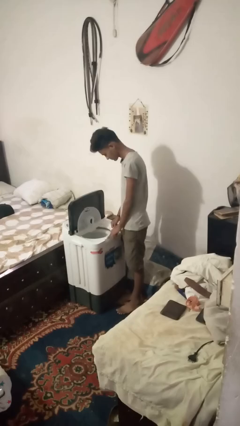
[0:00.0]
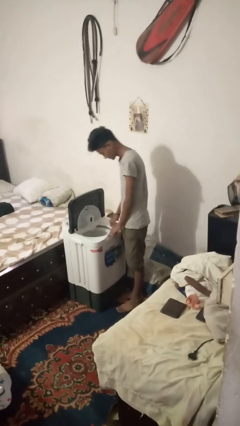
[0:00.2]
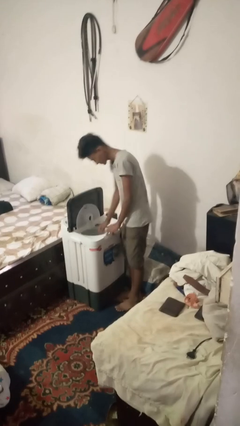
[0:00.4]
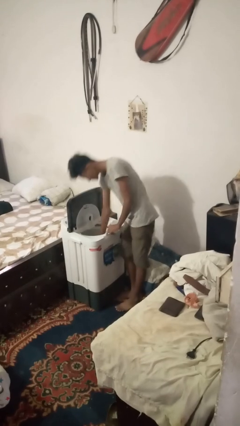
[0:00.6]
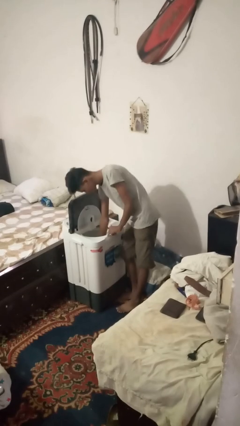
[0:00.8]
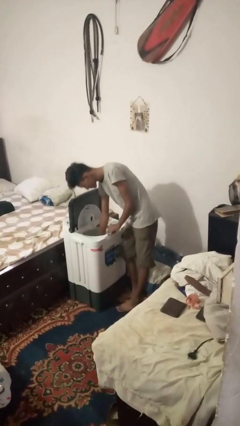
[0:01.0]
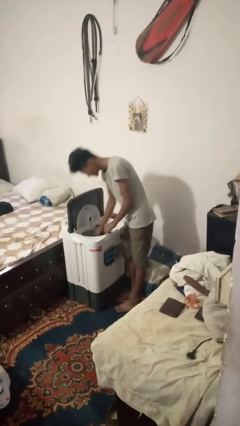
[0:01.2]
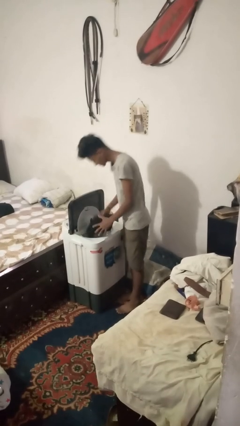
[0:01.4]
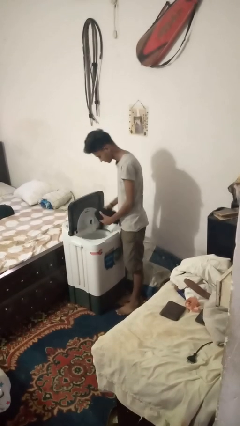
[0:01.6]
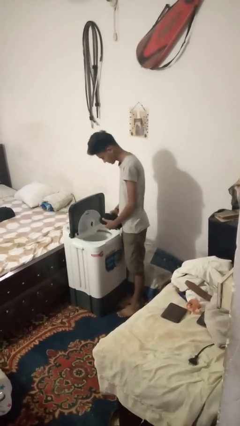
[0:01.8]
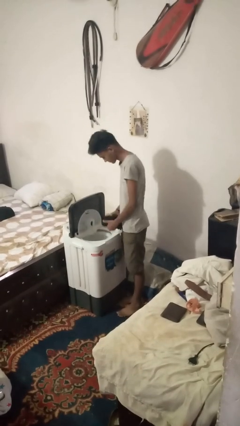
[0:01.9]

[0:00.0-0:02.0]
person unloads clotheswasher

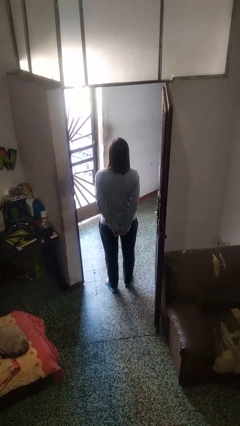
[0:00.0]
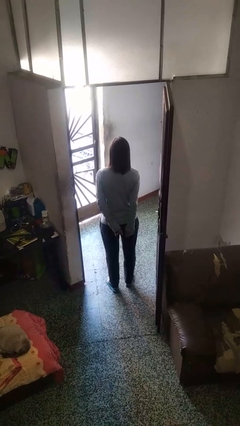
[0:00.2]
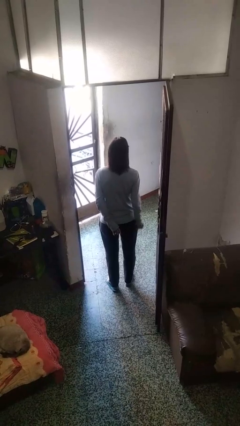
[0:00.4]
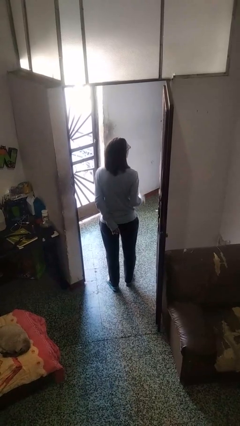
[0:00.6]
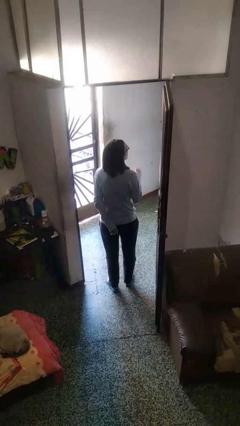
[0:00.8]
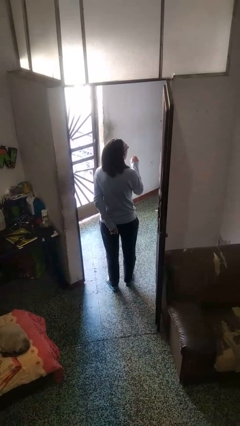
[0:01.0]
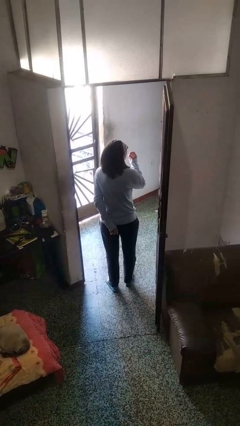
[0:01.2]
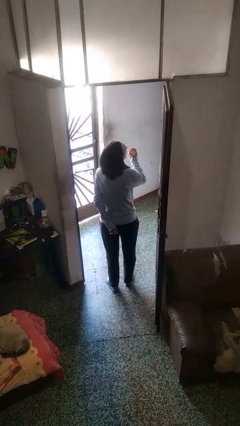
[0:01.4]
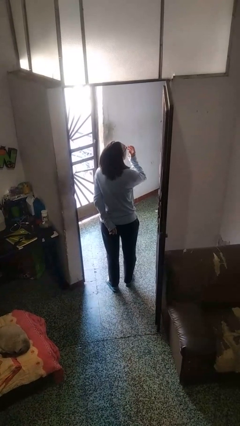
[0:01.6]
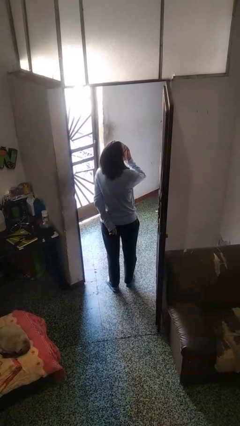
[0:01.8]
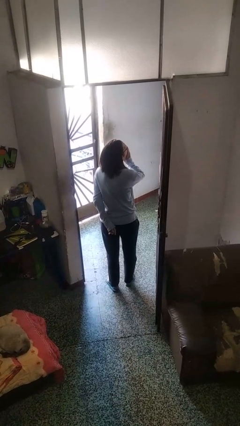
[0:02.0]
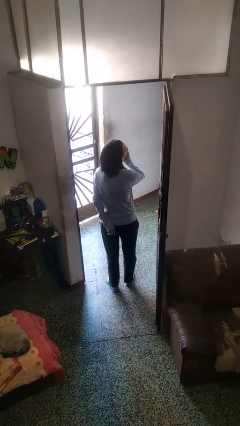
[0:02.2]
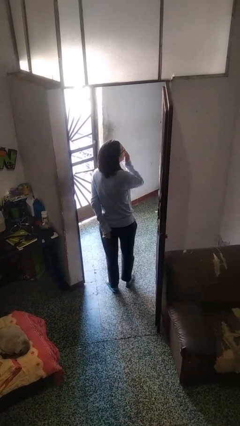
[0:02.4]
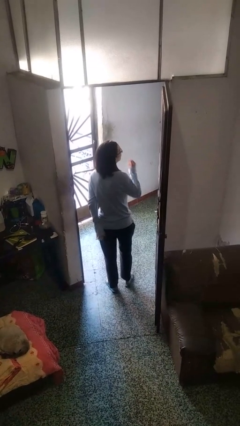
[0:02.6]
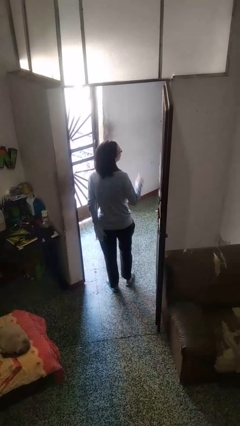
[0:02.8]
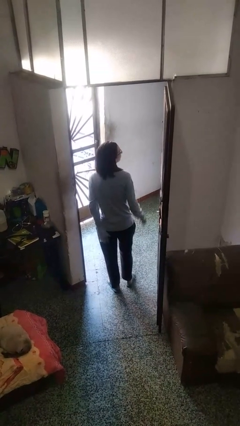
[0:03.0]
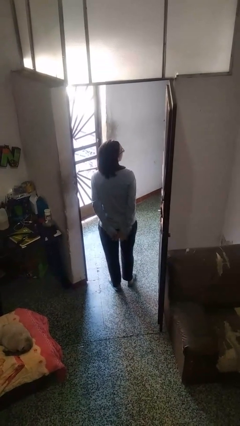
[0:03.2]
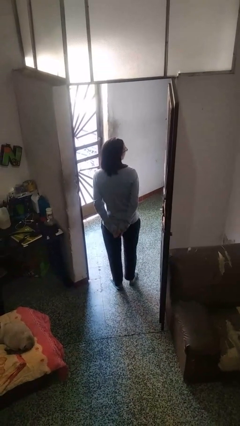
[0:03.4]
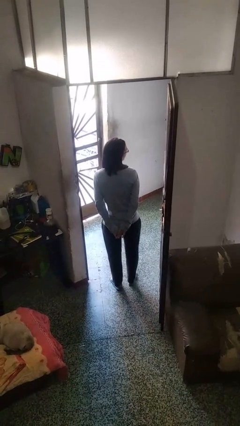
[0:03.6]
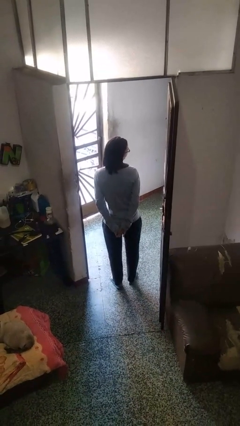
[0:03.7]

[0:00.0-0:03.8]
person yawns

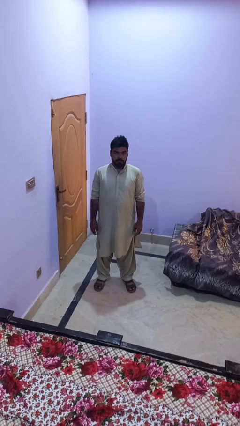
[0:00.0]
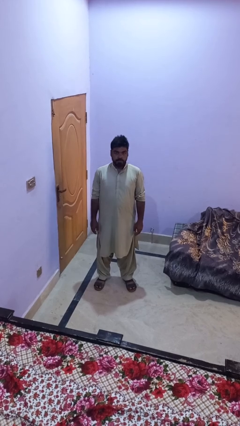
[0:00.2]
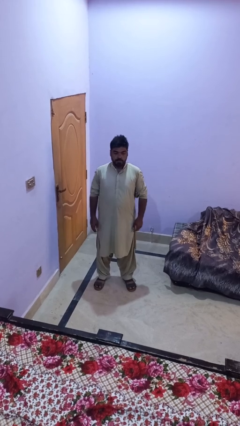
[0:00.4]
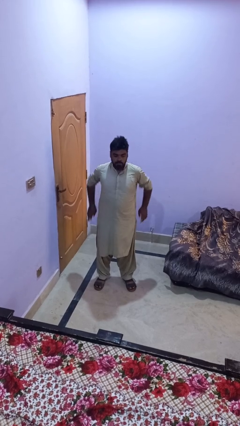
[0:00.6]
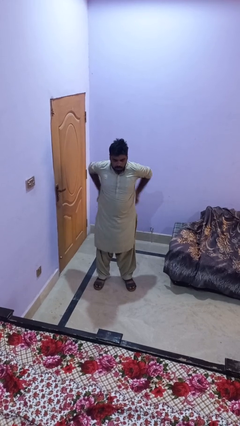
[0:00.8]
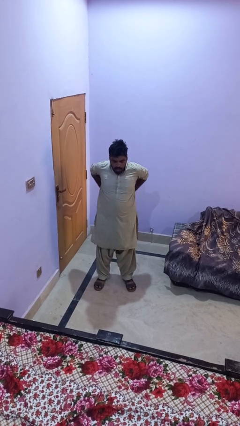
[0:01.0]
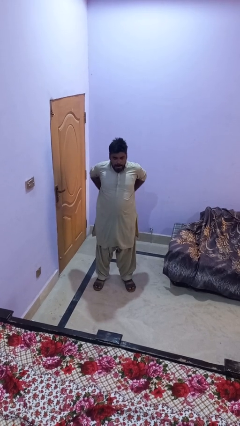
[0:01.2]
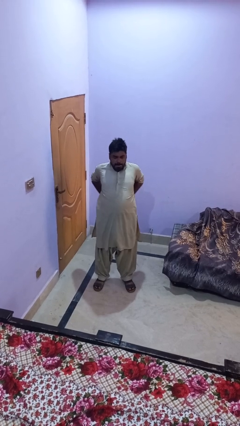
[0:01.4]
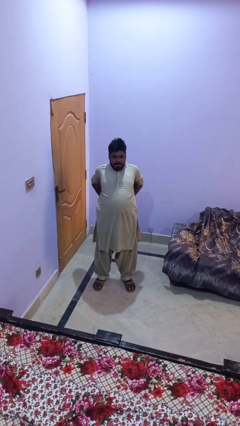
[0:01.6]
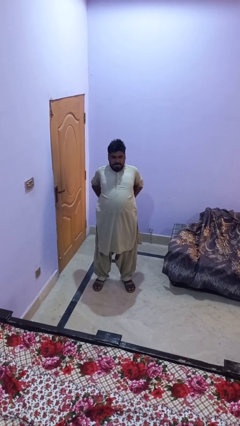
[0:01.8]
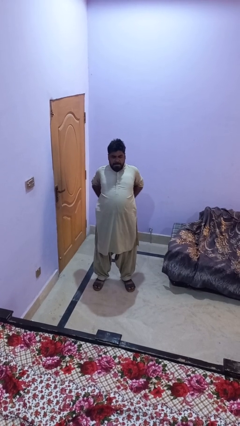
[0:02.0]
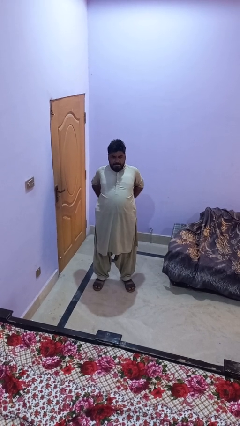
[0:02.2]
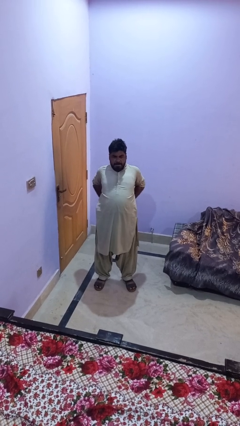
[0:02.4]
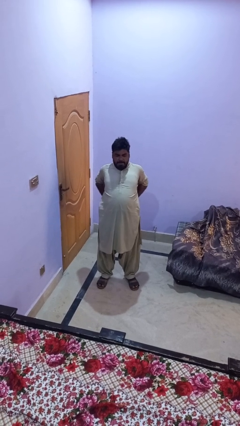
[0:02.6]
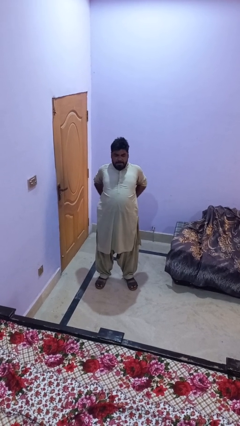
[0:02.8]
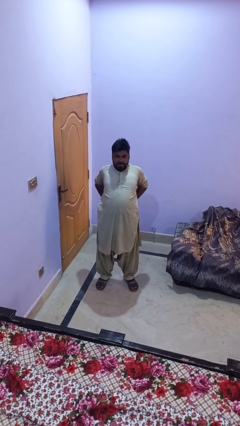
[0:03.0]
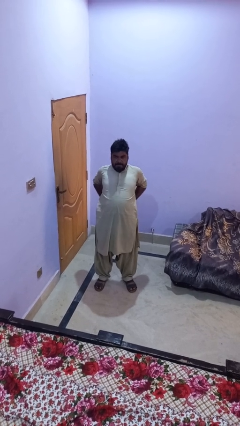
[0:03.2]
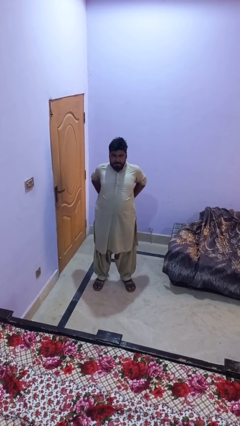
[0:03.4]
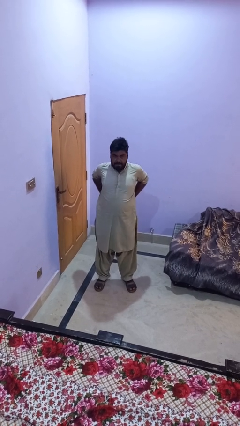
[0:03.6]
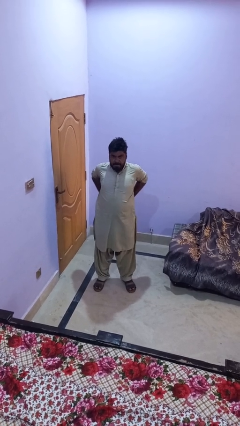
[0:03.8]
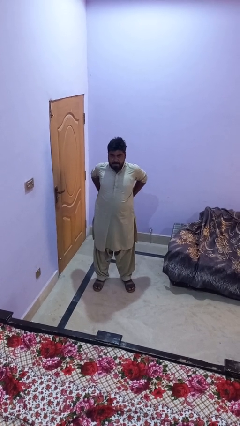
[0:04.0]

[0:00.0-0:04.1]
person stretches back

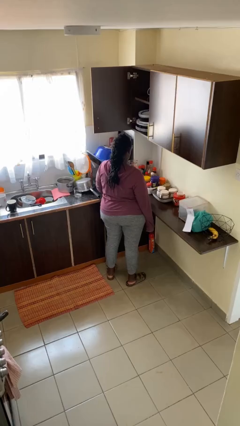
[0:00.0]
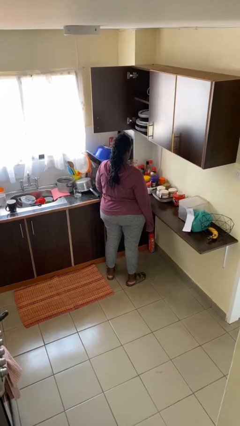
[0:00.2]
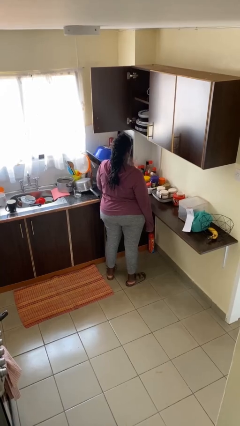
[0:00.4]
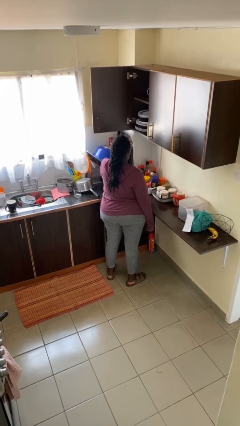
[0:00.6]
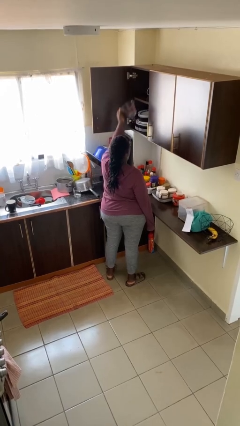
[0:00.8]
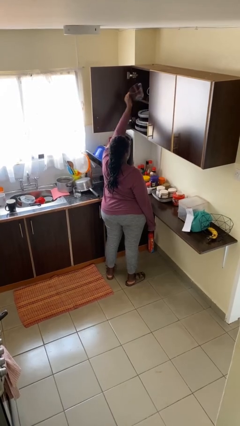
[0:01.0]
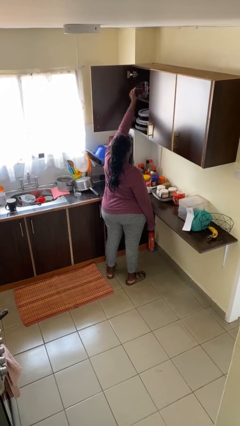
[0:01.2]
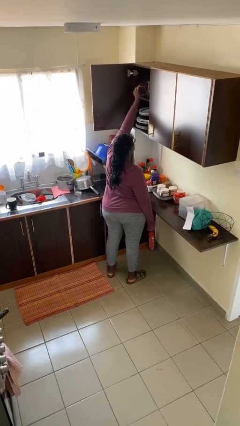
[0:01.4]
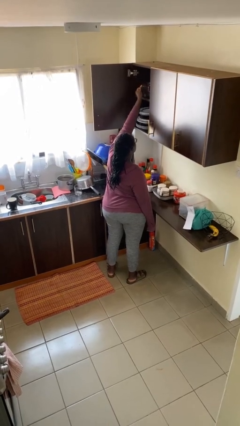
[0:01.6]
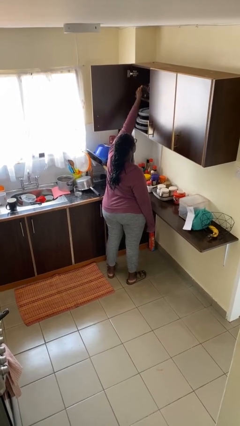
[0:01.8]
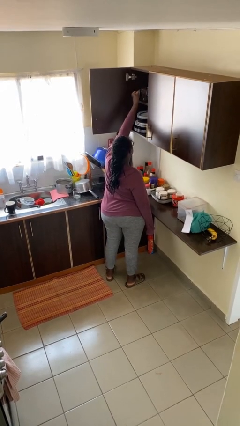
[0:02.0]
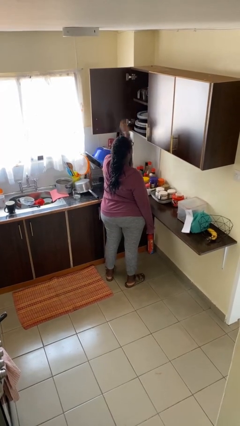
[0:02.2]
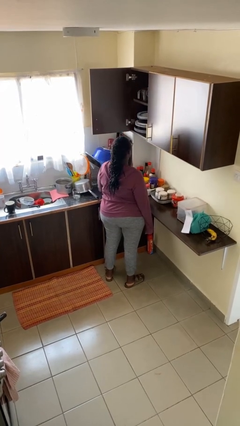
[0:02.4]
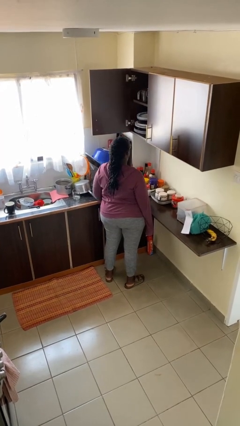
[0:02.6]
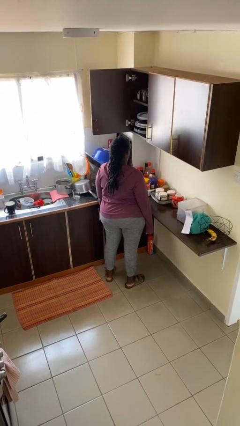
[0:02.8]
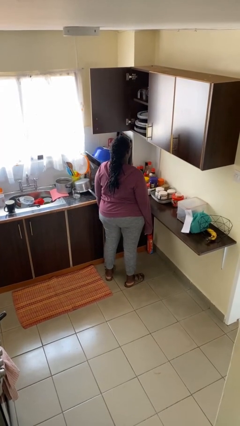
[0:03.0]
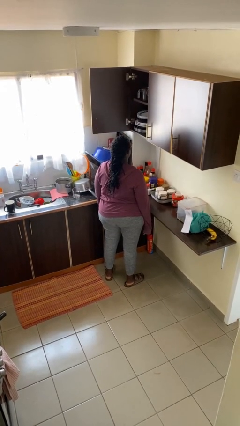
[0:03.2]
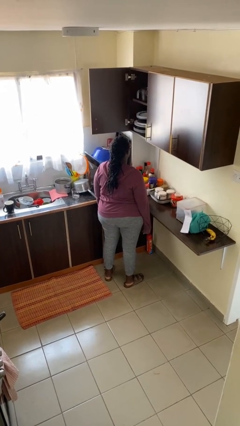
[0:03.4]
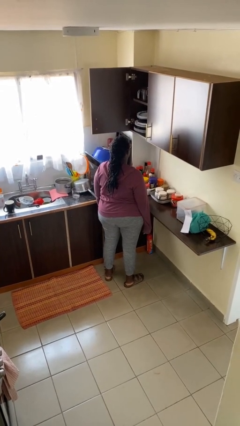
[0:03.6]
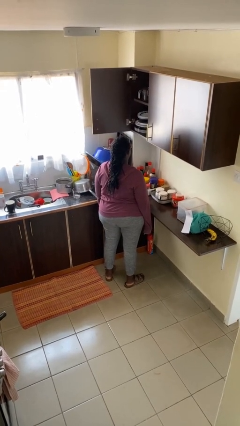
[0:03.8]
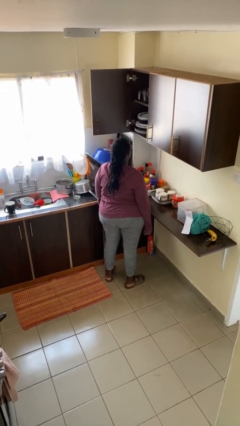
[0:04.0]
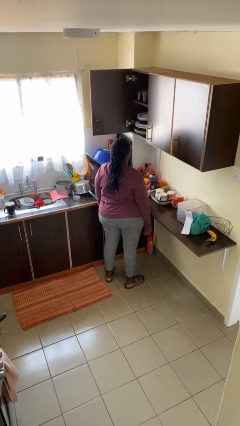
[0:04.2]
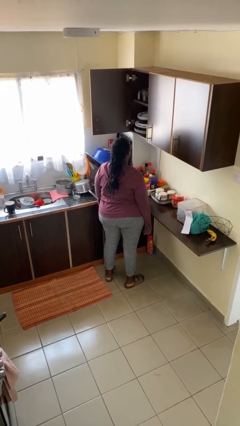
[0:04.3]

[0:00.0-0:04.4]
person puts down object into cabinet

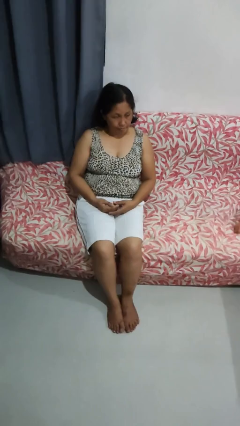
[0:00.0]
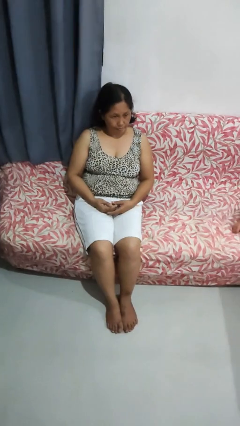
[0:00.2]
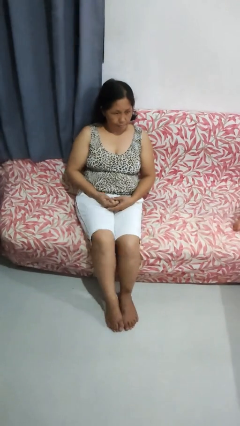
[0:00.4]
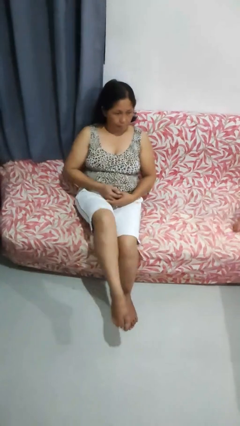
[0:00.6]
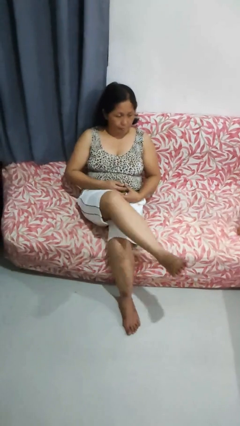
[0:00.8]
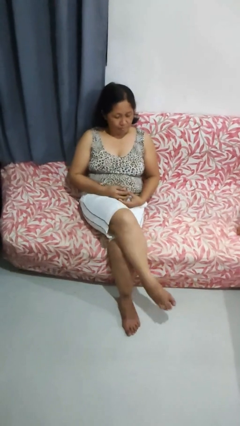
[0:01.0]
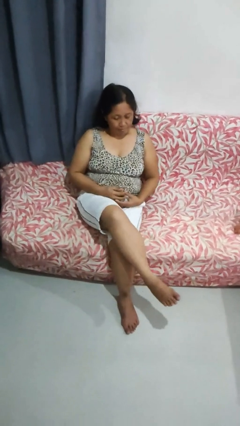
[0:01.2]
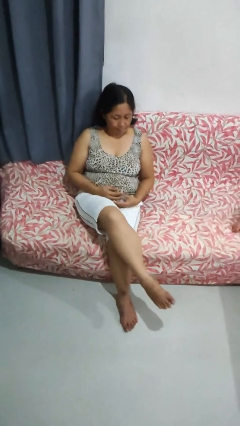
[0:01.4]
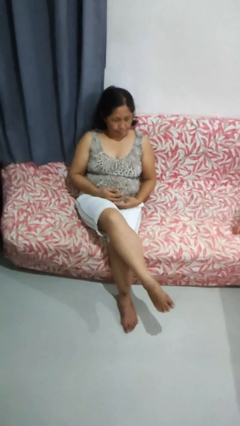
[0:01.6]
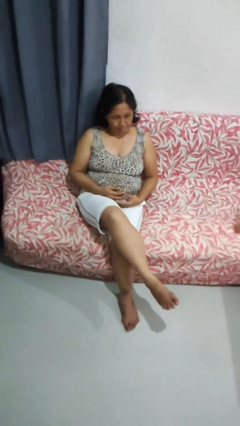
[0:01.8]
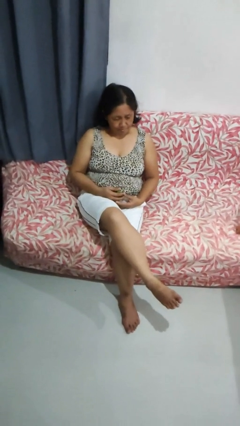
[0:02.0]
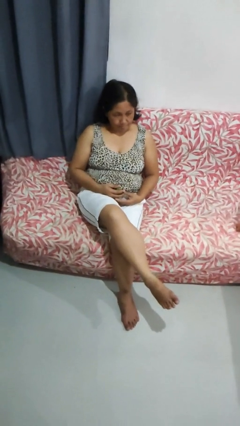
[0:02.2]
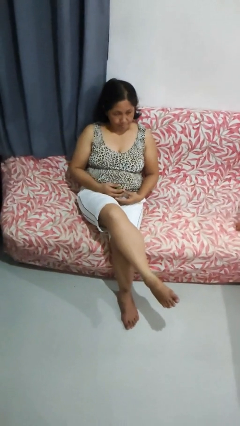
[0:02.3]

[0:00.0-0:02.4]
person crosses legs

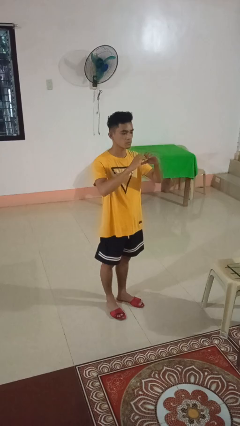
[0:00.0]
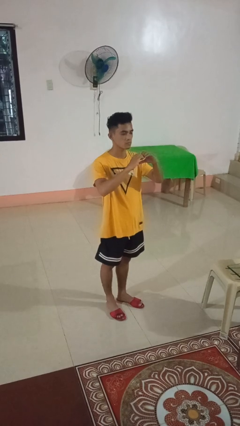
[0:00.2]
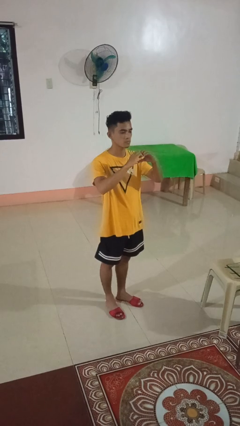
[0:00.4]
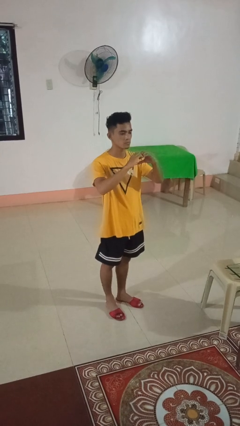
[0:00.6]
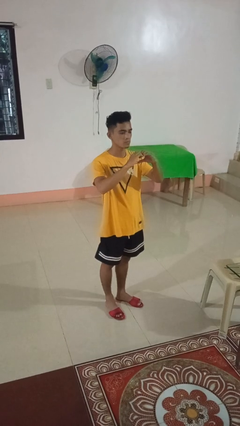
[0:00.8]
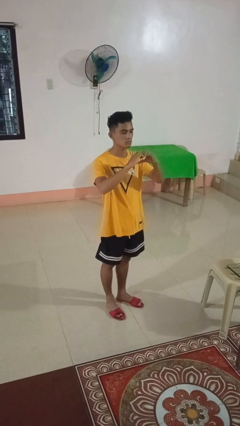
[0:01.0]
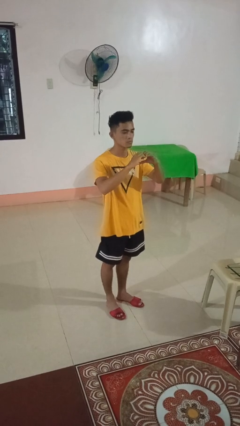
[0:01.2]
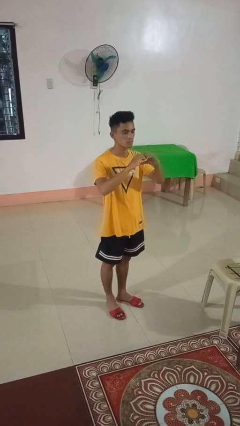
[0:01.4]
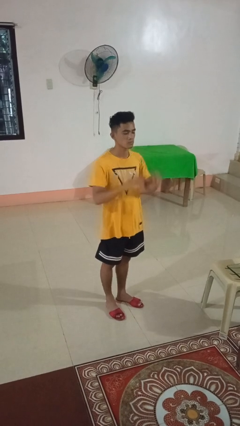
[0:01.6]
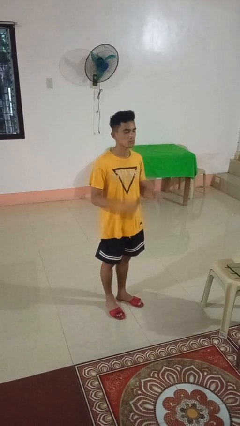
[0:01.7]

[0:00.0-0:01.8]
person gestures heart
